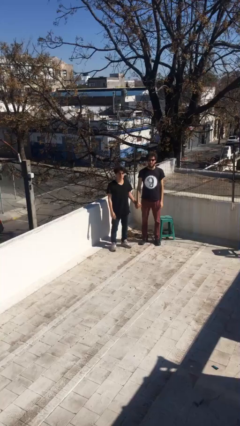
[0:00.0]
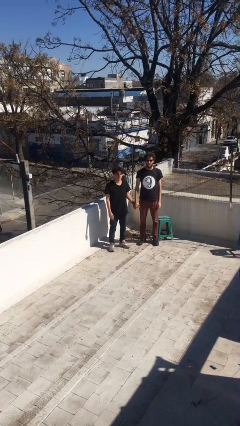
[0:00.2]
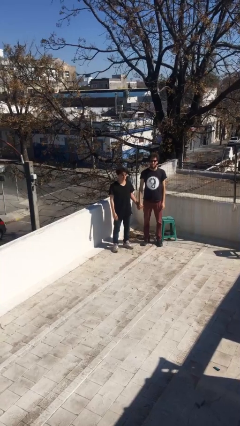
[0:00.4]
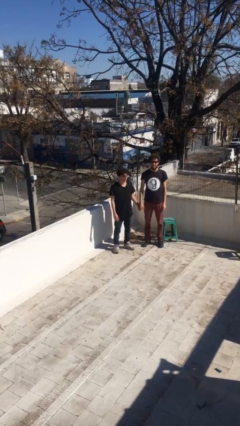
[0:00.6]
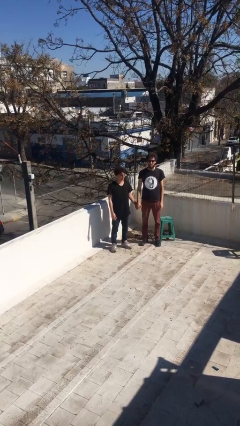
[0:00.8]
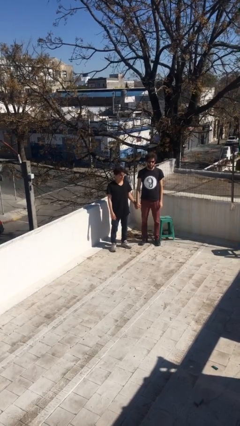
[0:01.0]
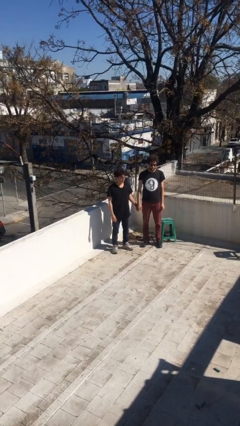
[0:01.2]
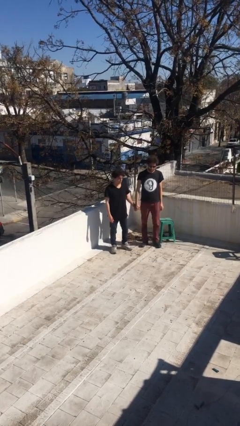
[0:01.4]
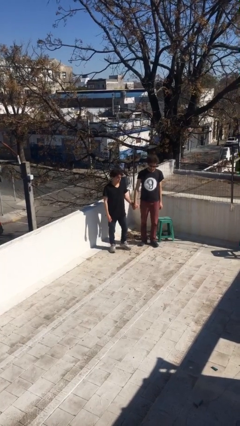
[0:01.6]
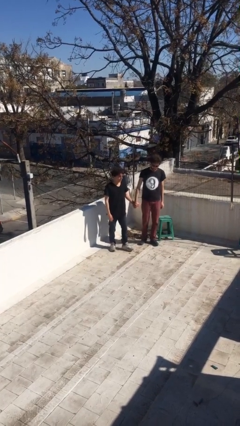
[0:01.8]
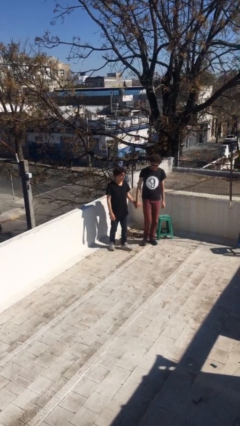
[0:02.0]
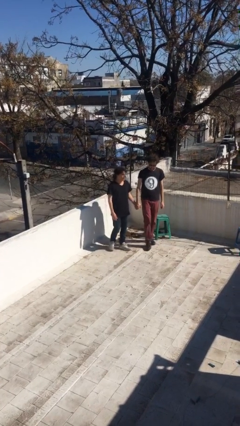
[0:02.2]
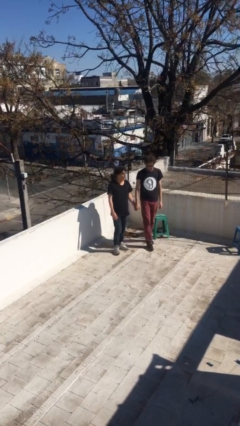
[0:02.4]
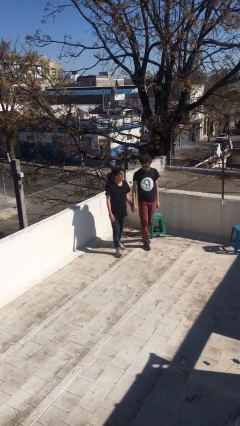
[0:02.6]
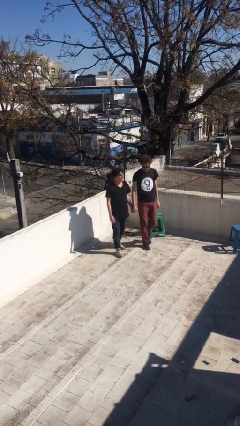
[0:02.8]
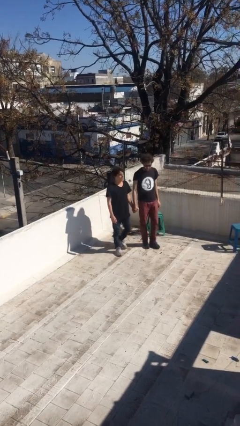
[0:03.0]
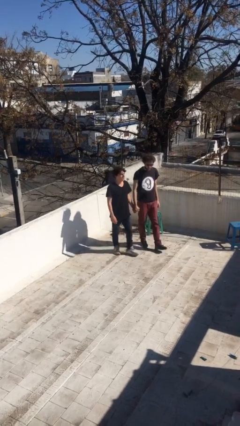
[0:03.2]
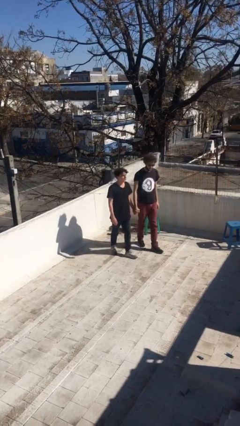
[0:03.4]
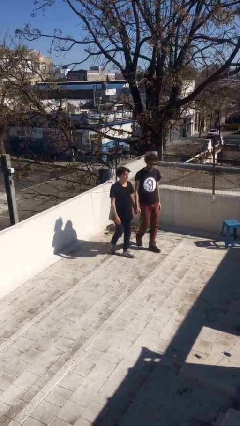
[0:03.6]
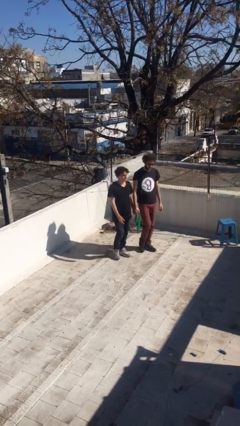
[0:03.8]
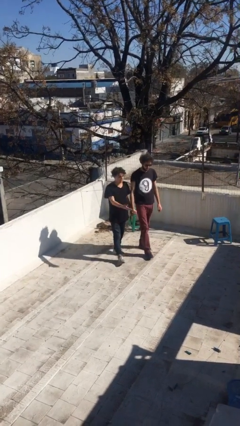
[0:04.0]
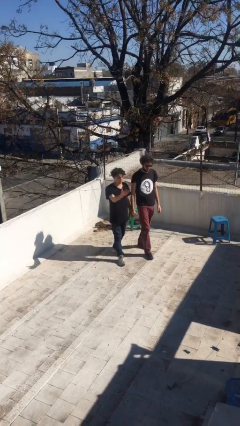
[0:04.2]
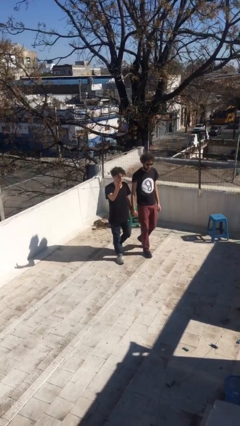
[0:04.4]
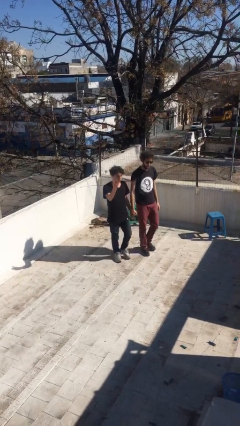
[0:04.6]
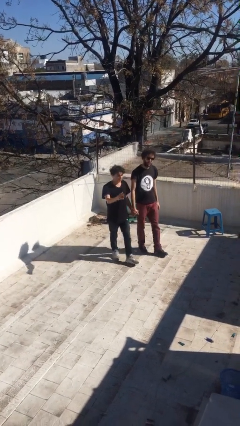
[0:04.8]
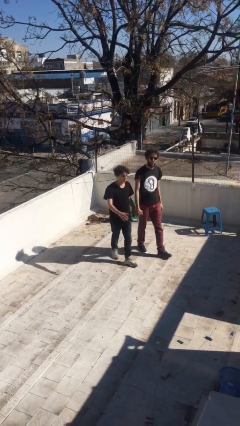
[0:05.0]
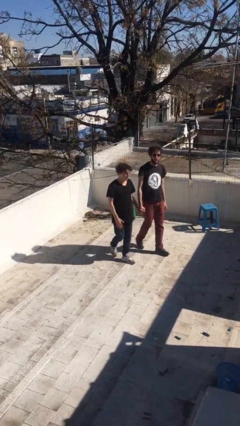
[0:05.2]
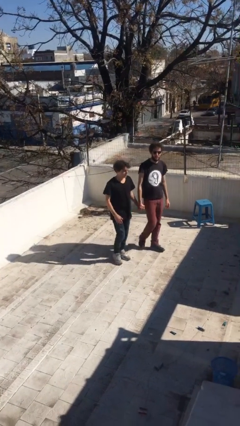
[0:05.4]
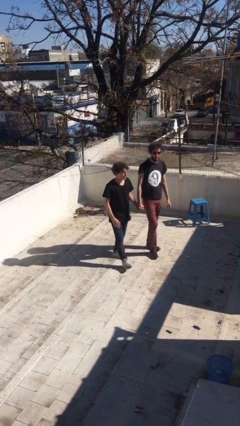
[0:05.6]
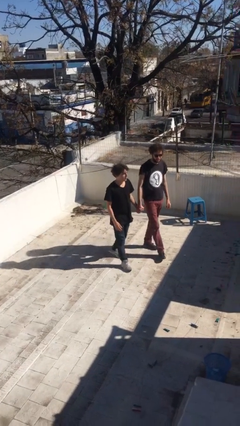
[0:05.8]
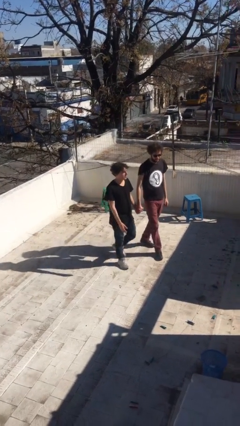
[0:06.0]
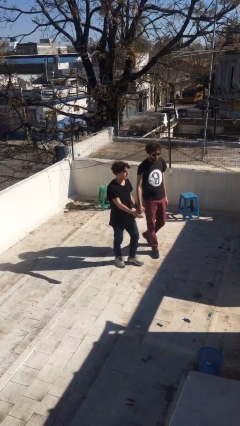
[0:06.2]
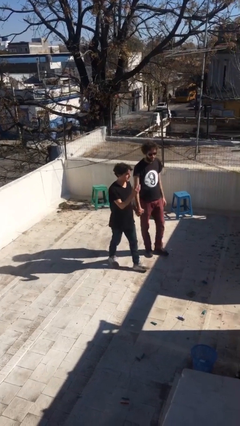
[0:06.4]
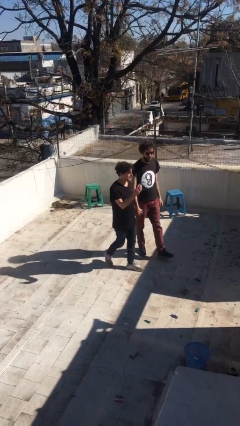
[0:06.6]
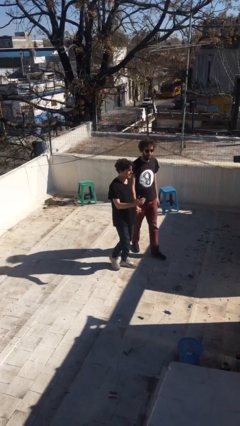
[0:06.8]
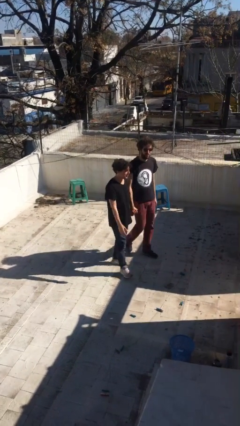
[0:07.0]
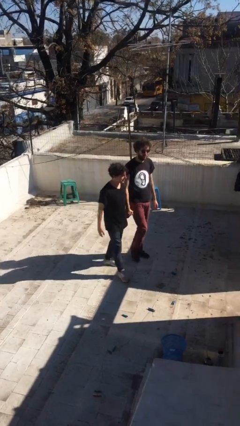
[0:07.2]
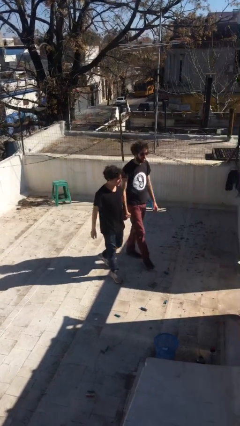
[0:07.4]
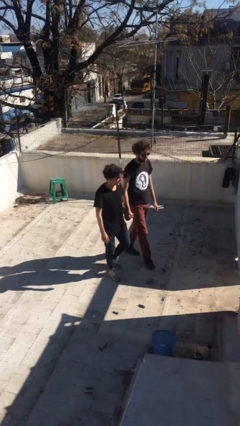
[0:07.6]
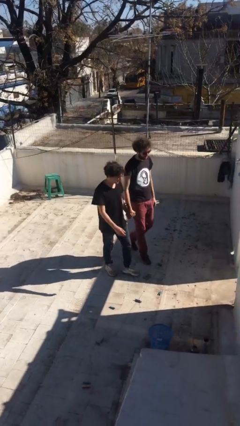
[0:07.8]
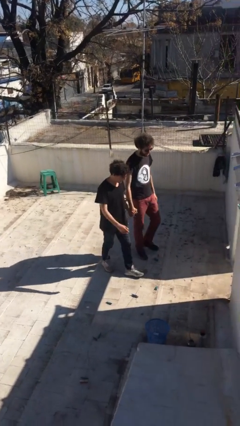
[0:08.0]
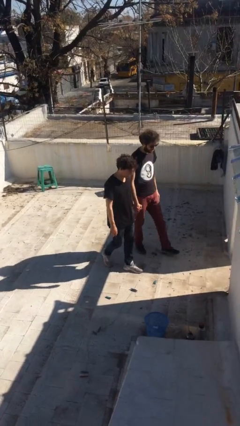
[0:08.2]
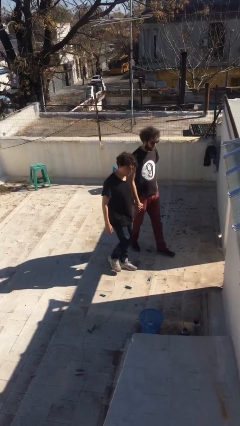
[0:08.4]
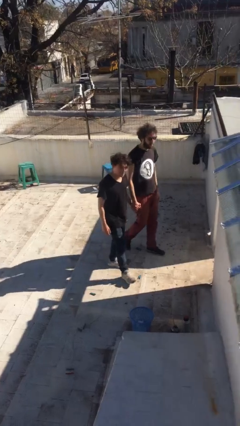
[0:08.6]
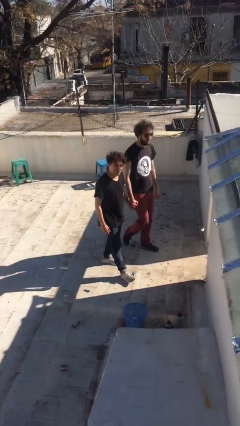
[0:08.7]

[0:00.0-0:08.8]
person holds hand

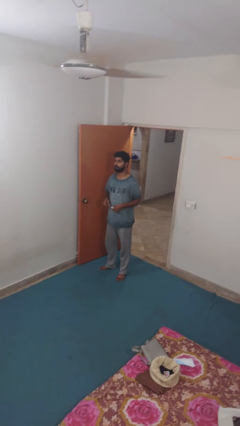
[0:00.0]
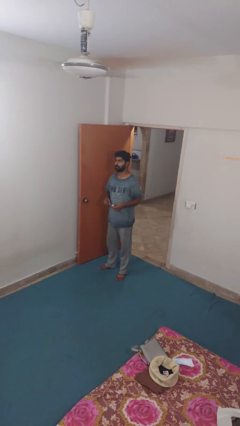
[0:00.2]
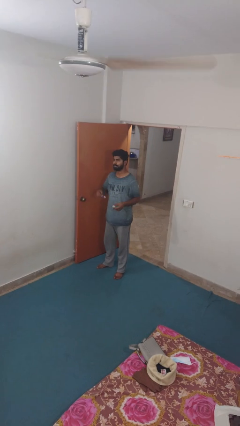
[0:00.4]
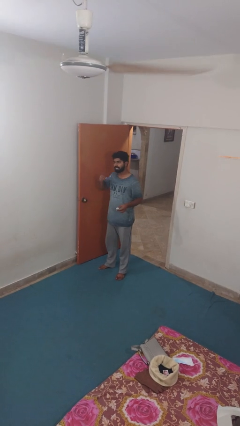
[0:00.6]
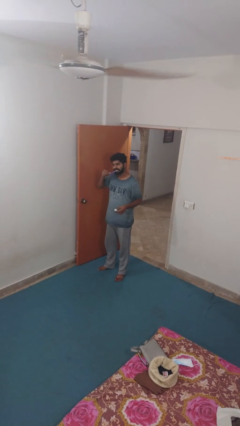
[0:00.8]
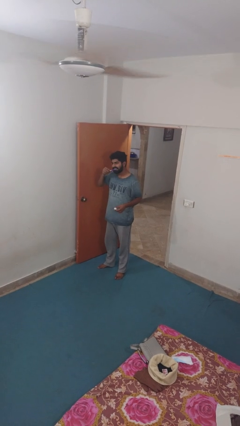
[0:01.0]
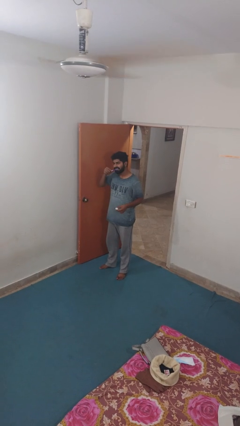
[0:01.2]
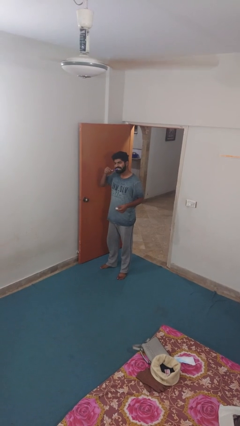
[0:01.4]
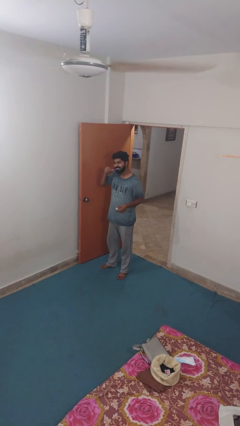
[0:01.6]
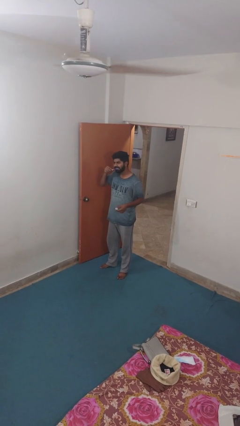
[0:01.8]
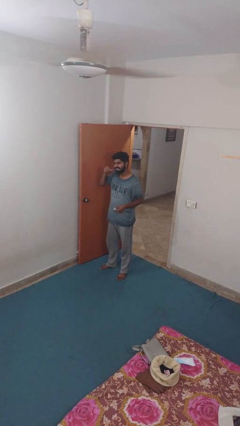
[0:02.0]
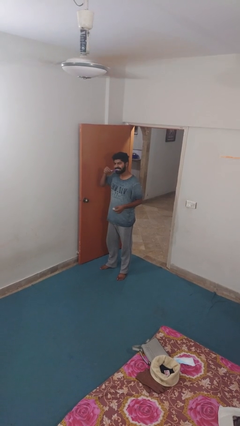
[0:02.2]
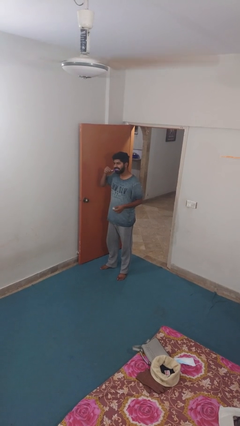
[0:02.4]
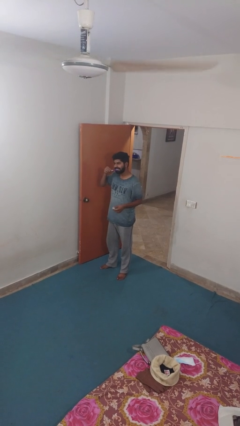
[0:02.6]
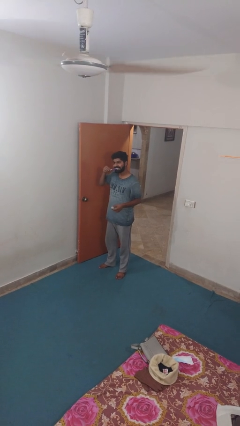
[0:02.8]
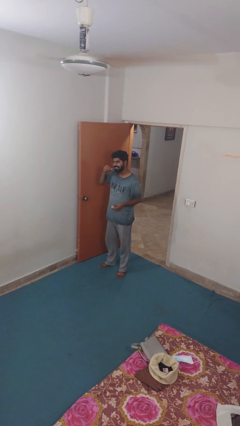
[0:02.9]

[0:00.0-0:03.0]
person brushes teeth

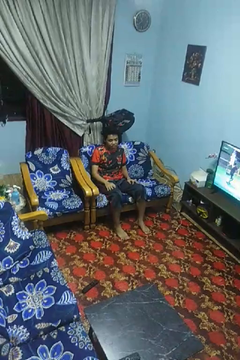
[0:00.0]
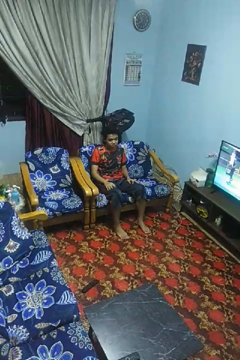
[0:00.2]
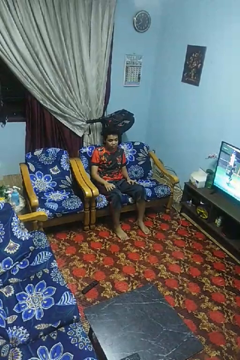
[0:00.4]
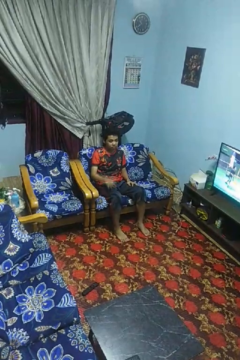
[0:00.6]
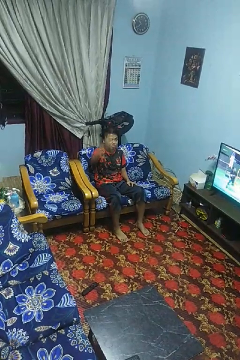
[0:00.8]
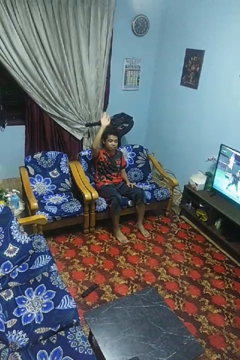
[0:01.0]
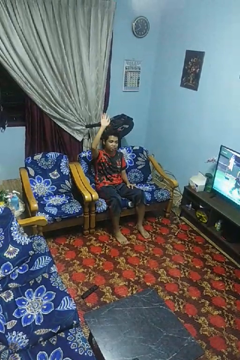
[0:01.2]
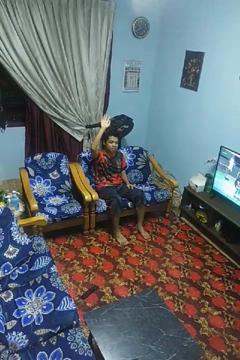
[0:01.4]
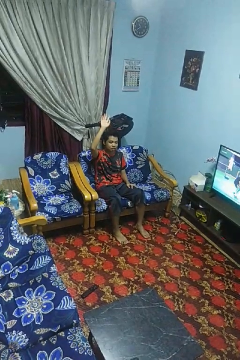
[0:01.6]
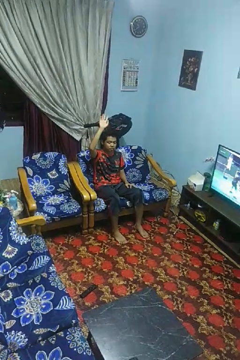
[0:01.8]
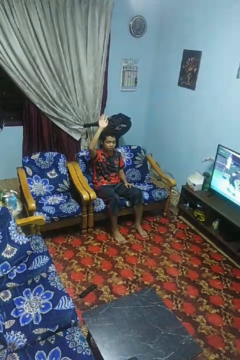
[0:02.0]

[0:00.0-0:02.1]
person gestures raise hand

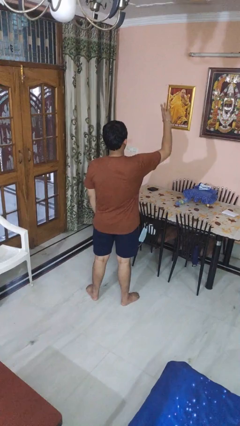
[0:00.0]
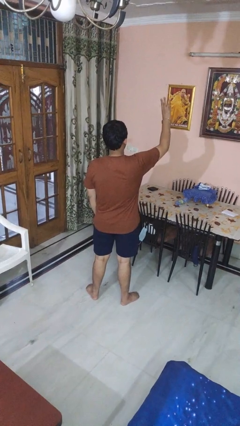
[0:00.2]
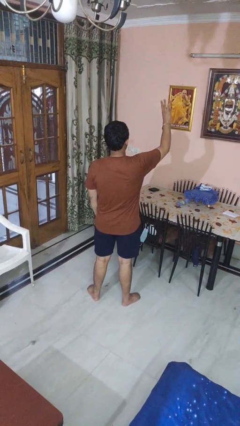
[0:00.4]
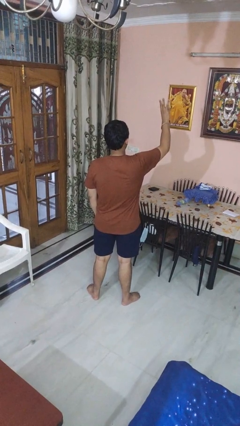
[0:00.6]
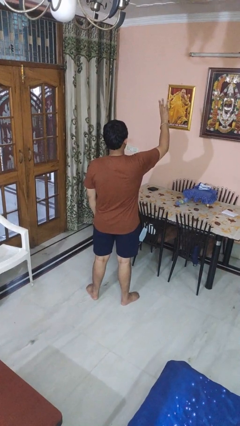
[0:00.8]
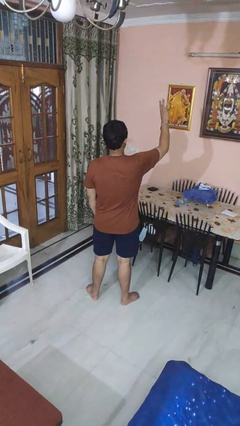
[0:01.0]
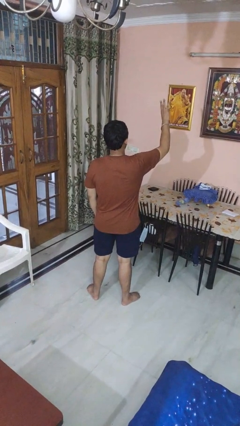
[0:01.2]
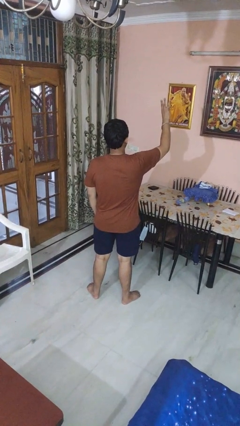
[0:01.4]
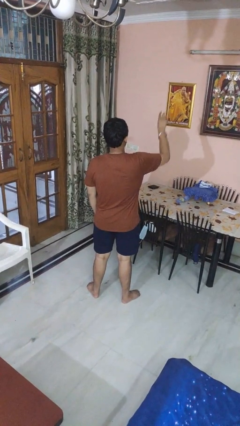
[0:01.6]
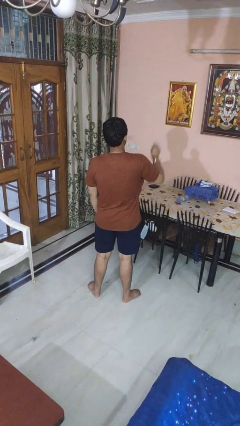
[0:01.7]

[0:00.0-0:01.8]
person gestures number three

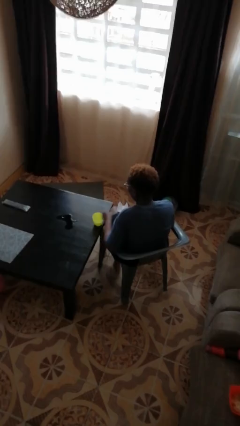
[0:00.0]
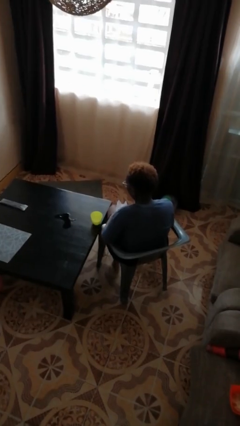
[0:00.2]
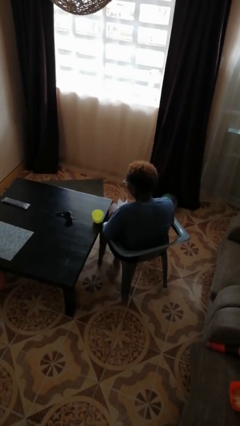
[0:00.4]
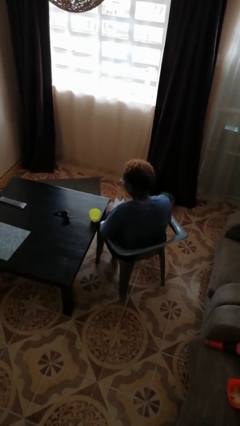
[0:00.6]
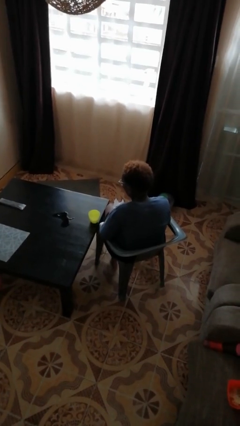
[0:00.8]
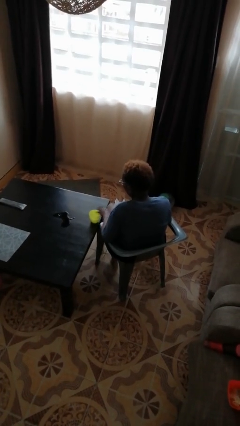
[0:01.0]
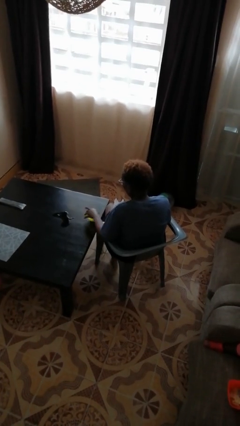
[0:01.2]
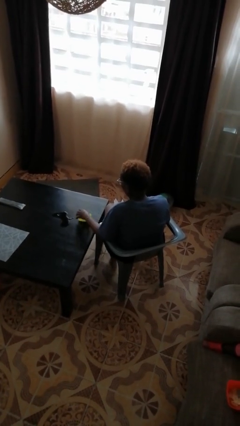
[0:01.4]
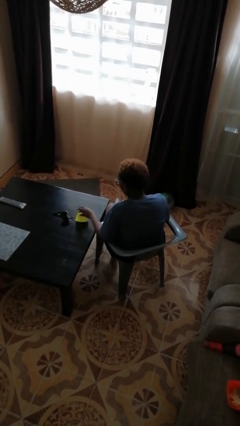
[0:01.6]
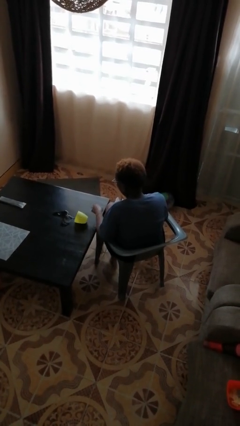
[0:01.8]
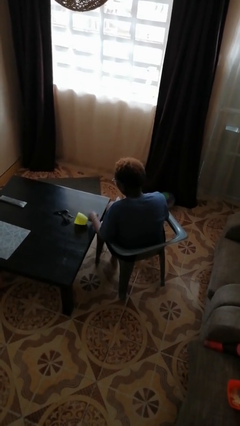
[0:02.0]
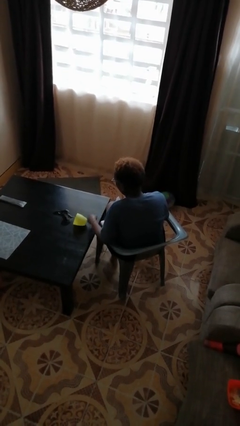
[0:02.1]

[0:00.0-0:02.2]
person spills on table

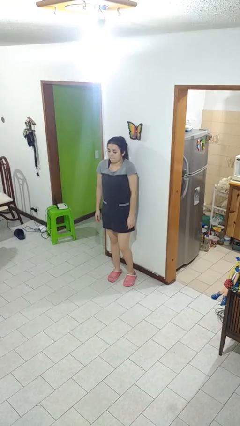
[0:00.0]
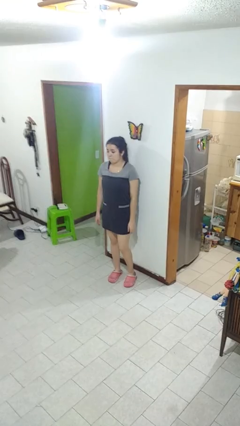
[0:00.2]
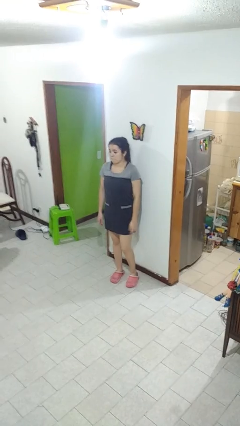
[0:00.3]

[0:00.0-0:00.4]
person shrugs
